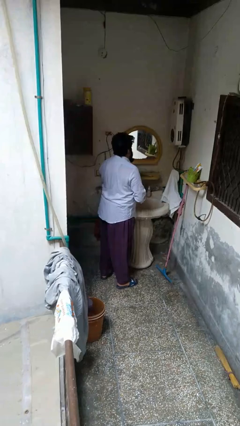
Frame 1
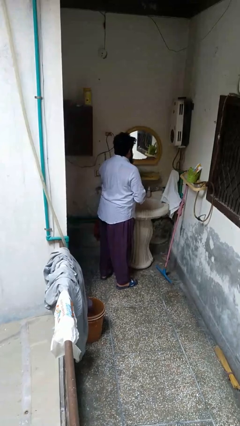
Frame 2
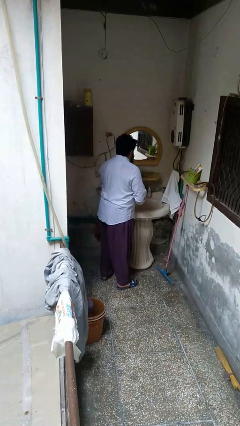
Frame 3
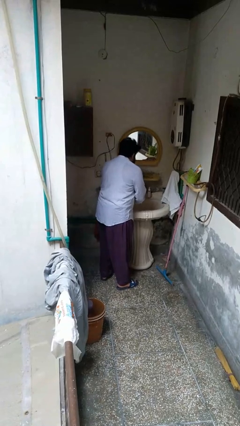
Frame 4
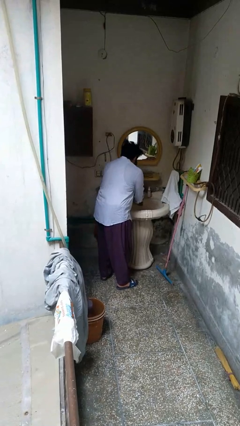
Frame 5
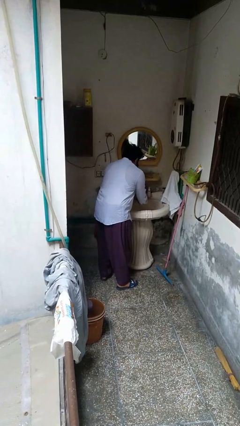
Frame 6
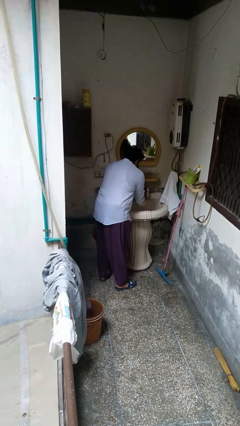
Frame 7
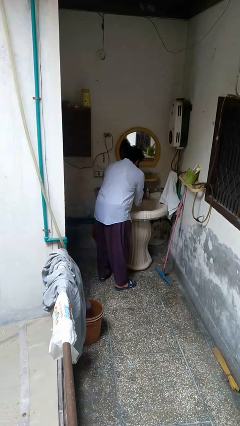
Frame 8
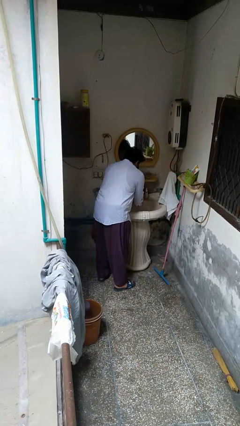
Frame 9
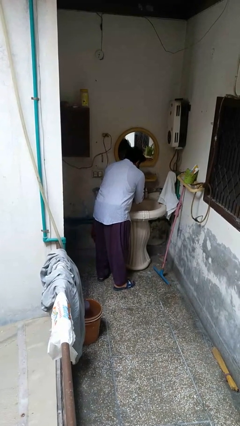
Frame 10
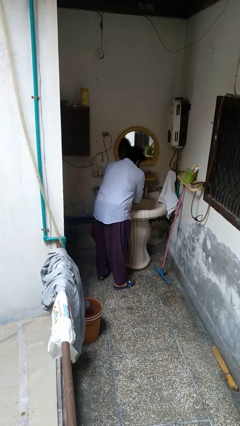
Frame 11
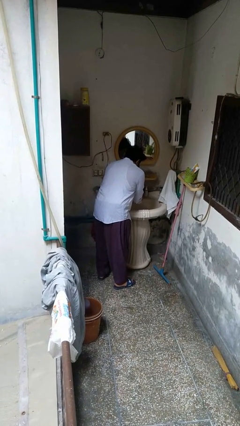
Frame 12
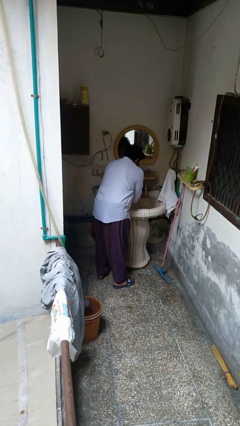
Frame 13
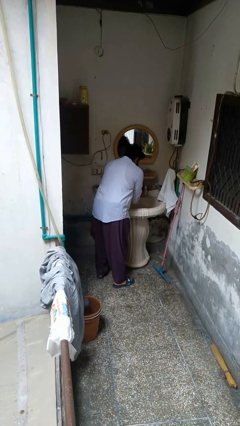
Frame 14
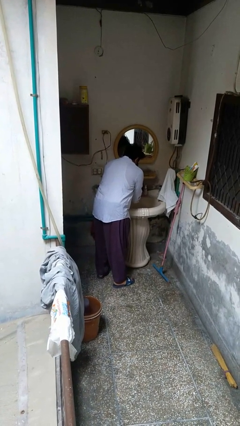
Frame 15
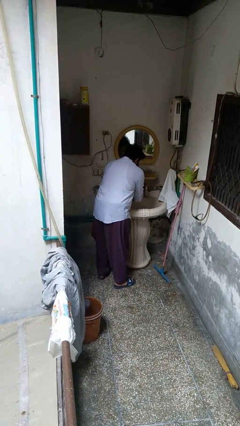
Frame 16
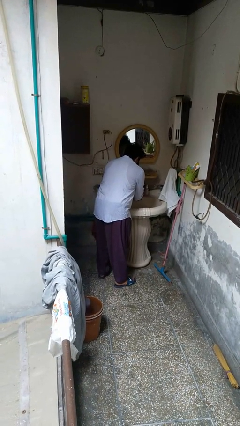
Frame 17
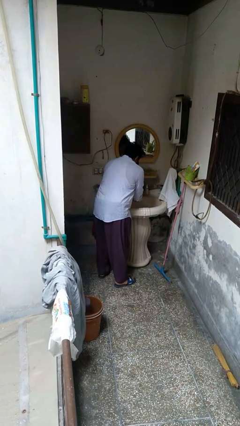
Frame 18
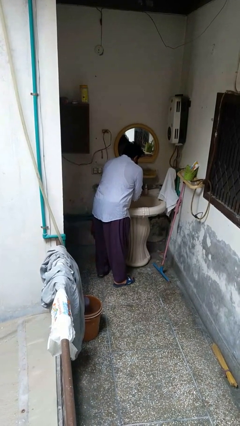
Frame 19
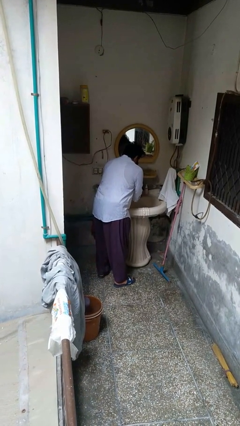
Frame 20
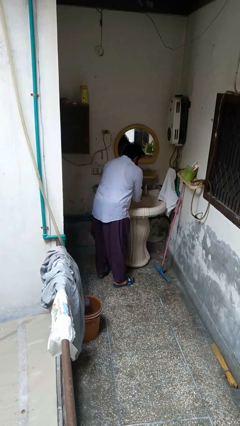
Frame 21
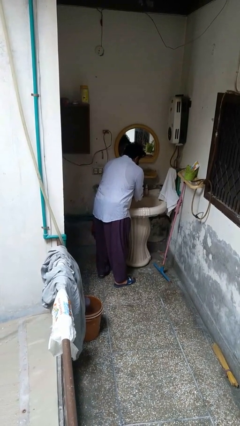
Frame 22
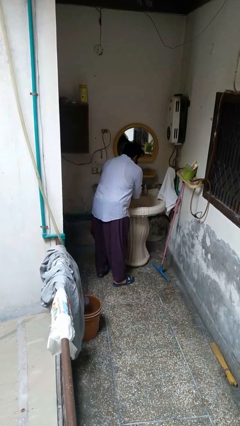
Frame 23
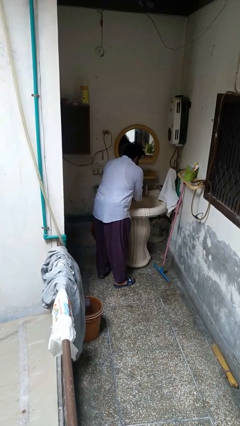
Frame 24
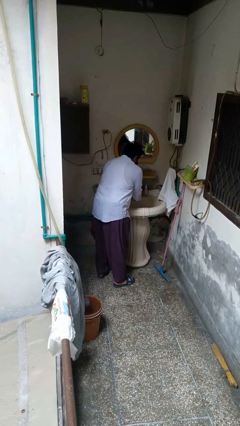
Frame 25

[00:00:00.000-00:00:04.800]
person washes hands

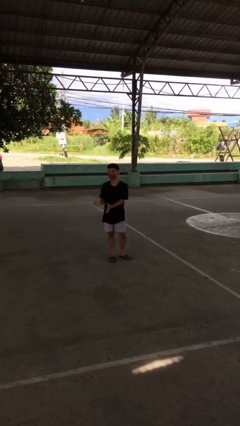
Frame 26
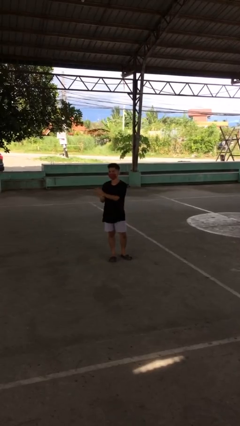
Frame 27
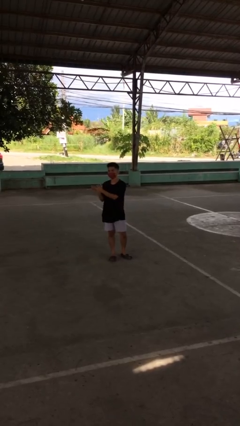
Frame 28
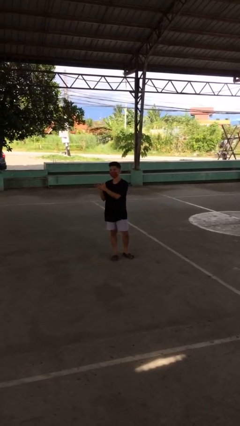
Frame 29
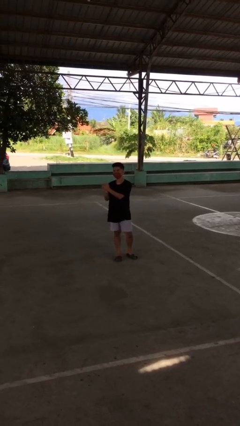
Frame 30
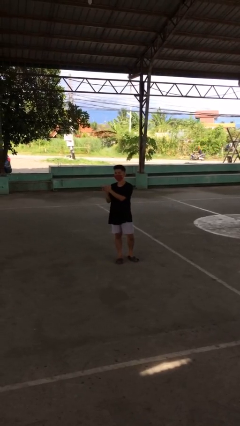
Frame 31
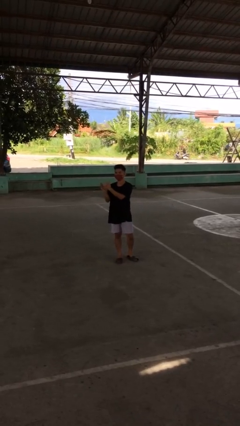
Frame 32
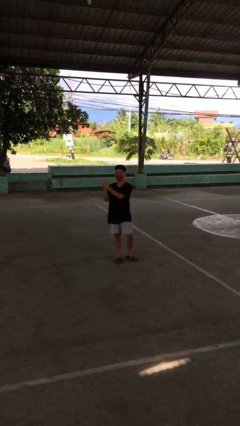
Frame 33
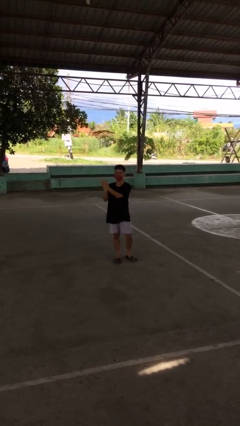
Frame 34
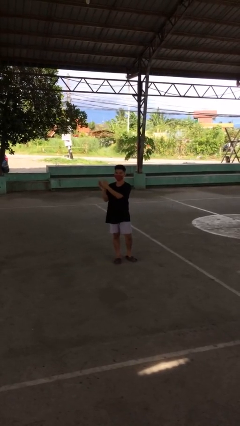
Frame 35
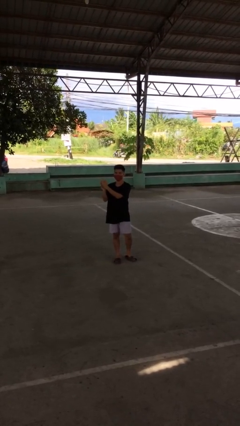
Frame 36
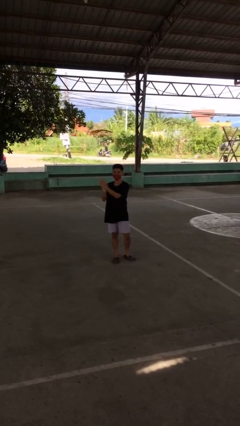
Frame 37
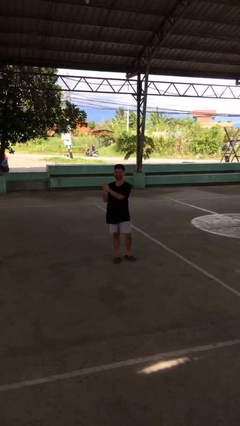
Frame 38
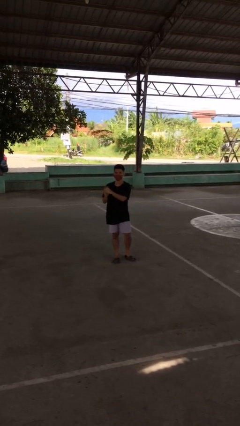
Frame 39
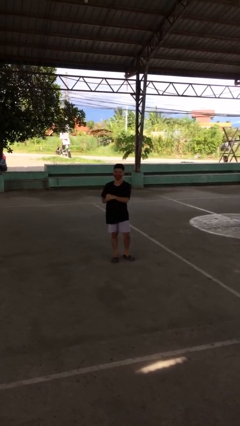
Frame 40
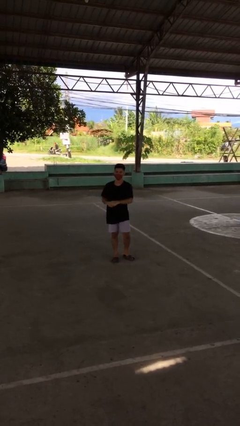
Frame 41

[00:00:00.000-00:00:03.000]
person claps hands

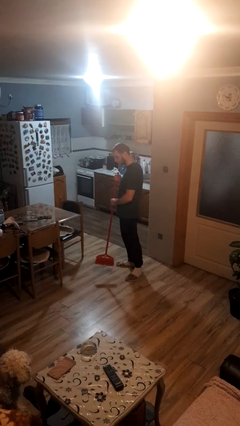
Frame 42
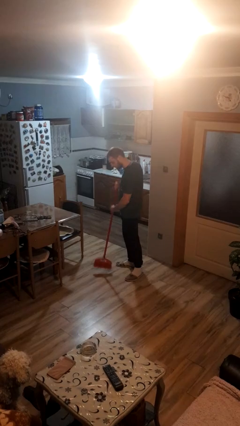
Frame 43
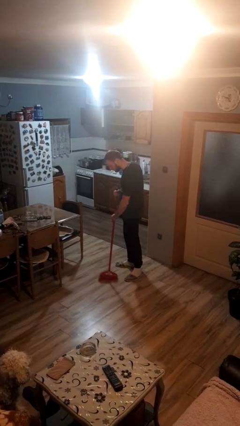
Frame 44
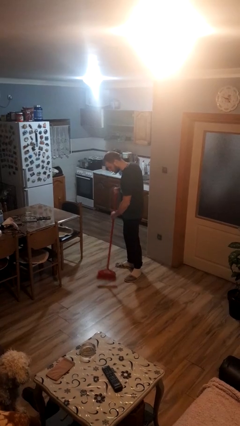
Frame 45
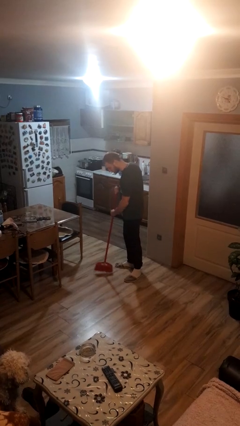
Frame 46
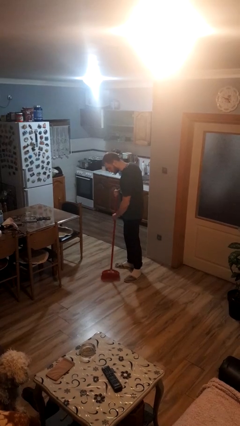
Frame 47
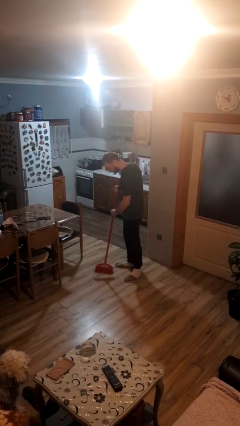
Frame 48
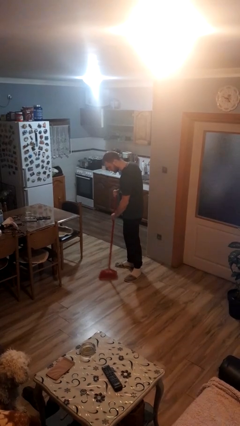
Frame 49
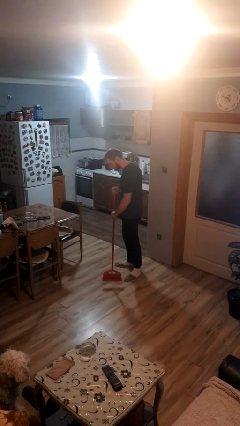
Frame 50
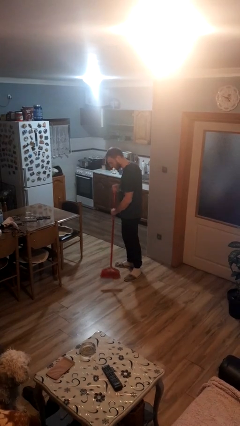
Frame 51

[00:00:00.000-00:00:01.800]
person sweeps floor

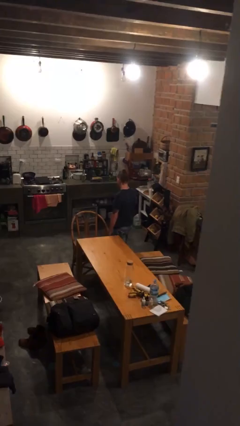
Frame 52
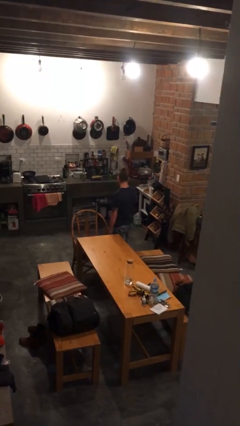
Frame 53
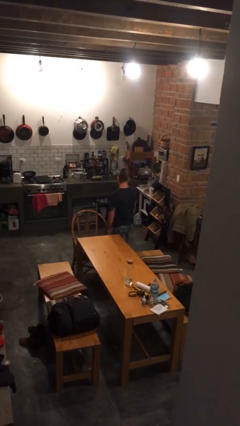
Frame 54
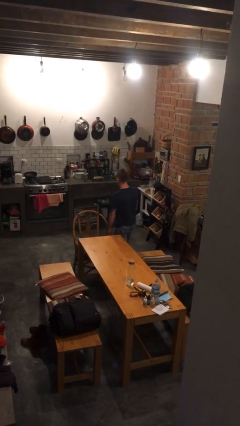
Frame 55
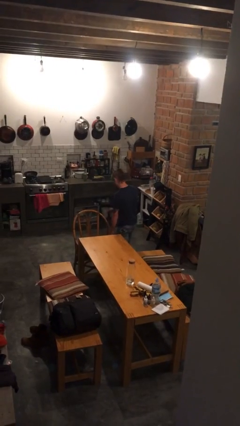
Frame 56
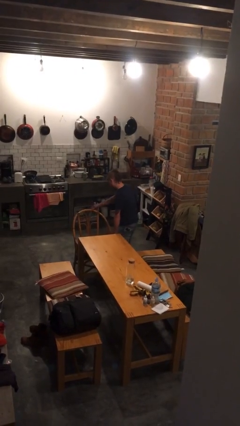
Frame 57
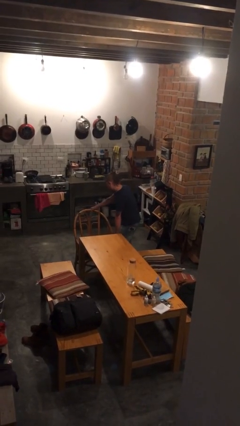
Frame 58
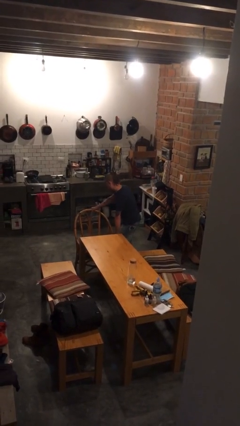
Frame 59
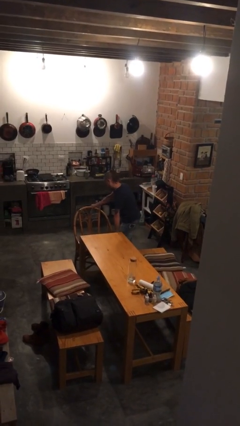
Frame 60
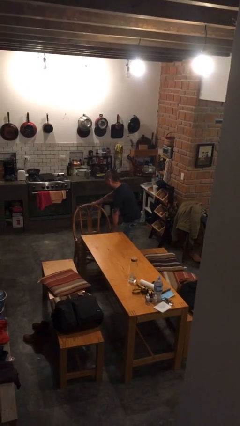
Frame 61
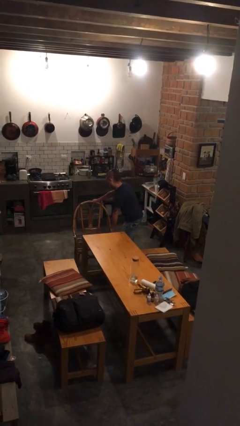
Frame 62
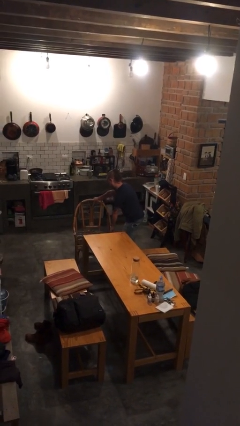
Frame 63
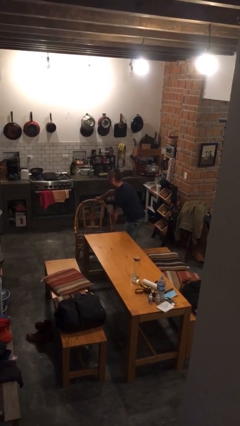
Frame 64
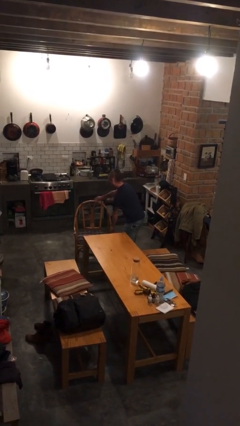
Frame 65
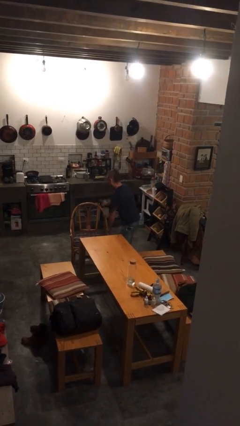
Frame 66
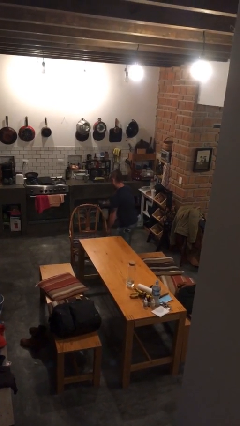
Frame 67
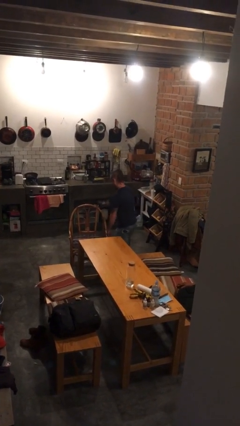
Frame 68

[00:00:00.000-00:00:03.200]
person pulls out chair

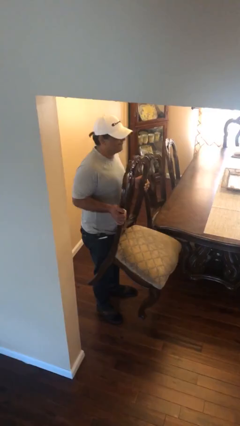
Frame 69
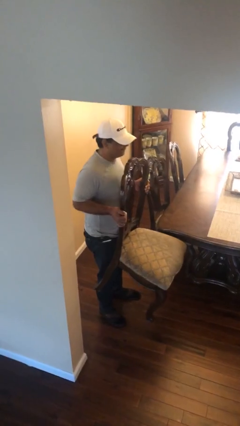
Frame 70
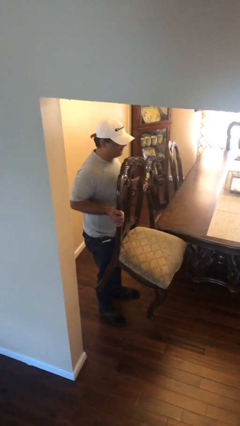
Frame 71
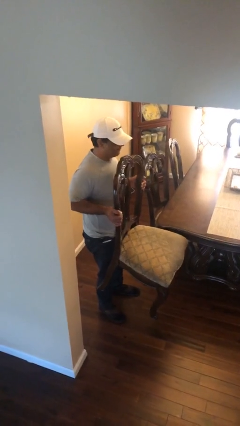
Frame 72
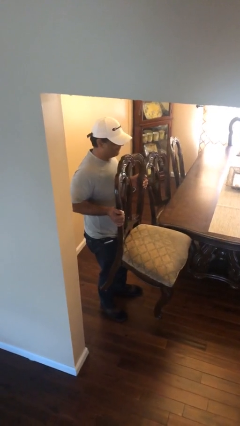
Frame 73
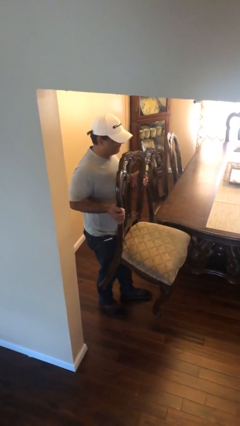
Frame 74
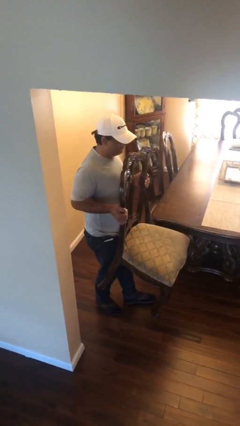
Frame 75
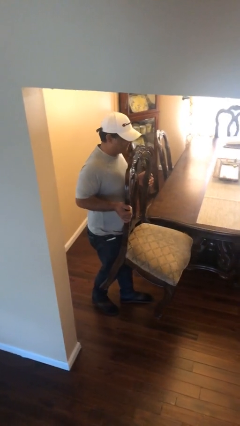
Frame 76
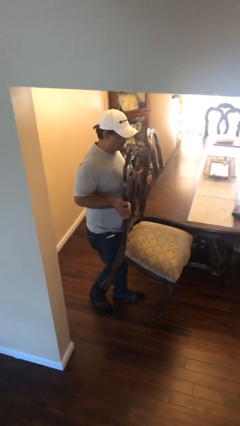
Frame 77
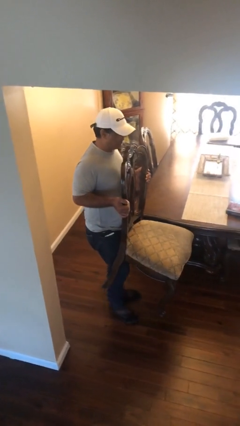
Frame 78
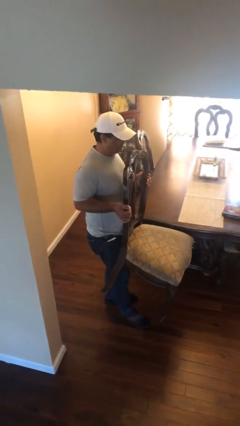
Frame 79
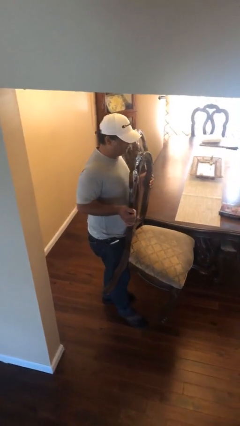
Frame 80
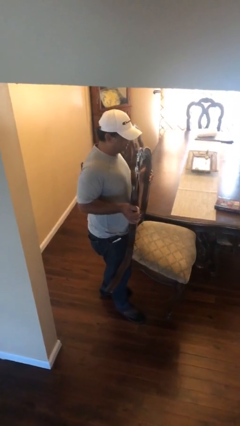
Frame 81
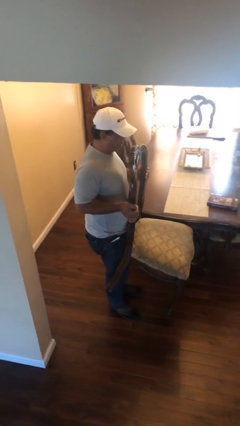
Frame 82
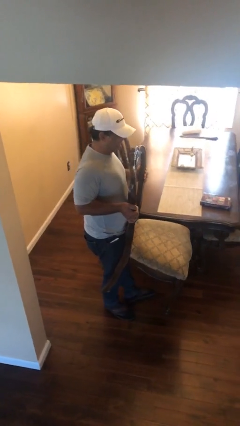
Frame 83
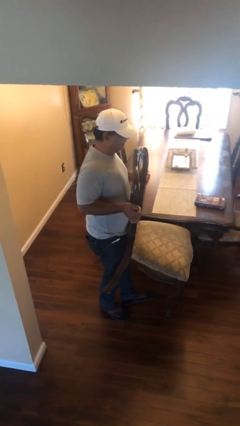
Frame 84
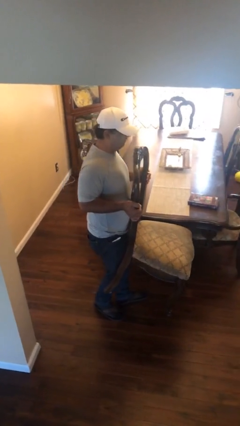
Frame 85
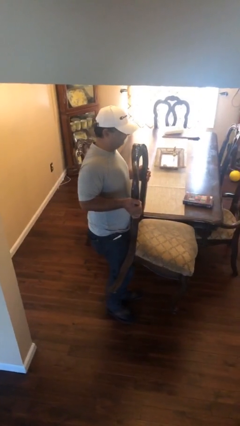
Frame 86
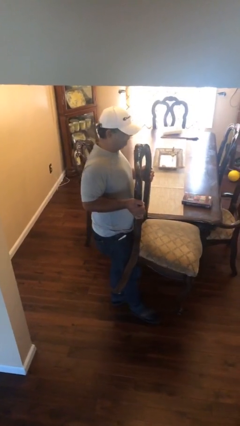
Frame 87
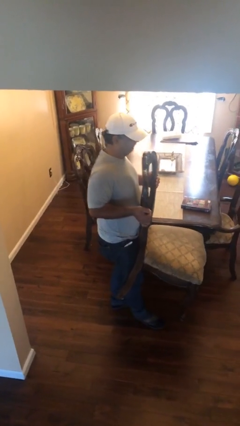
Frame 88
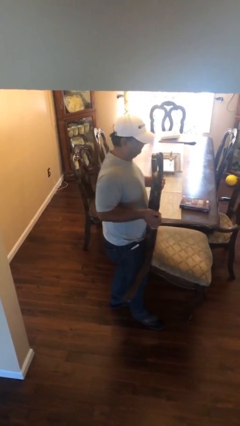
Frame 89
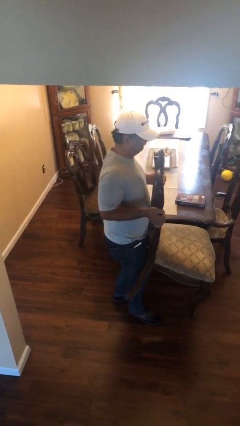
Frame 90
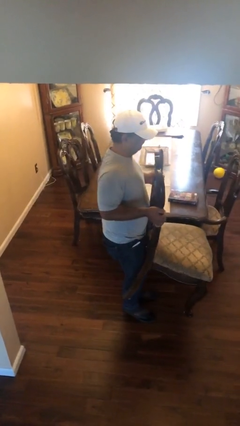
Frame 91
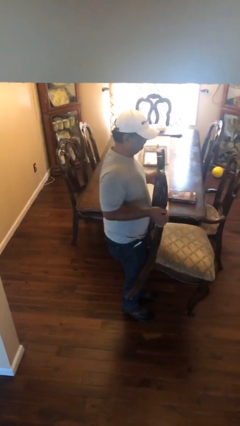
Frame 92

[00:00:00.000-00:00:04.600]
person carries heavy object

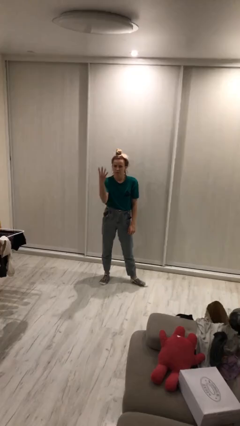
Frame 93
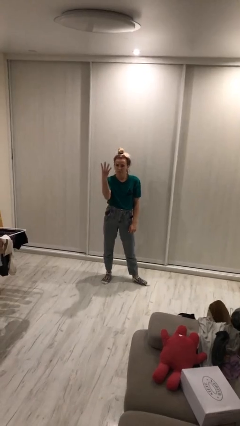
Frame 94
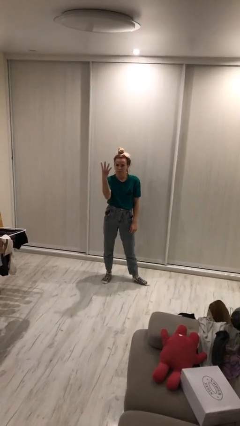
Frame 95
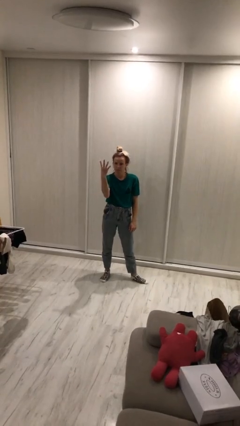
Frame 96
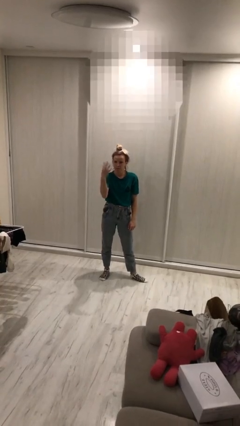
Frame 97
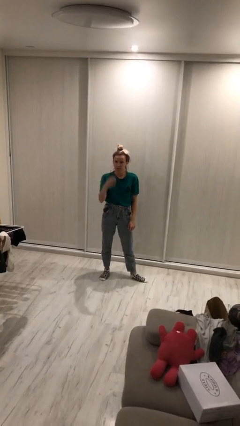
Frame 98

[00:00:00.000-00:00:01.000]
person gestures number four
